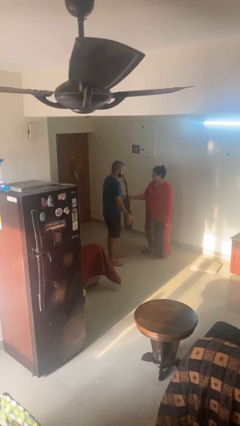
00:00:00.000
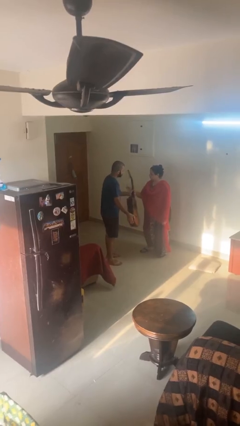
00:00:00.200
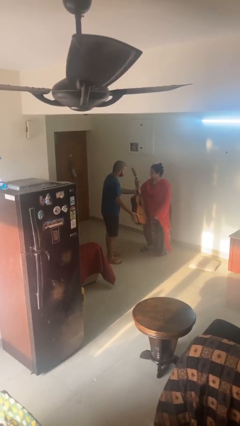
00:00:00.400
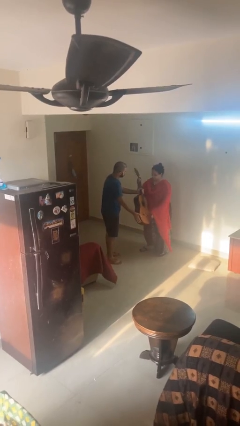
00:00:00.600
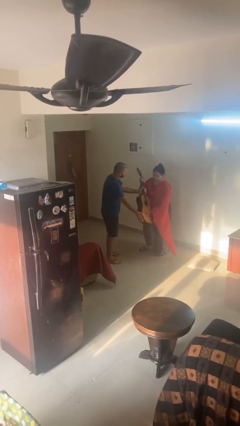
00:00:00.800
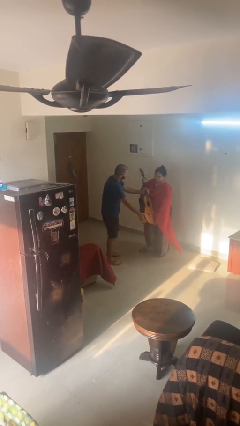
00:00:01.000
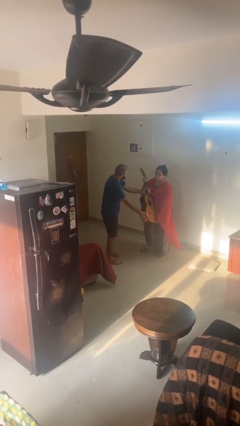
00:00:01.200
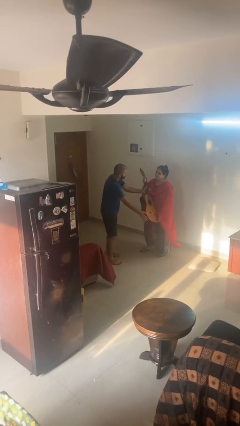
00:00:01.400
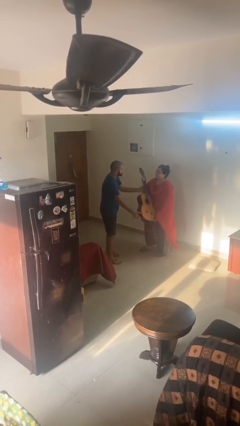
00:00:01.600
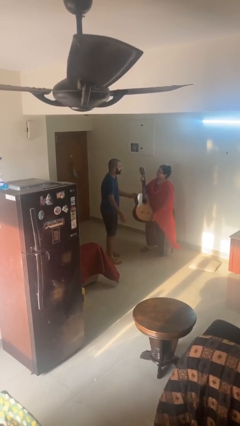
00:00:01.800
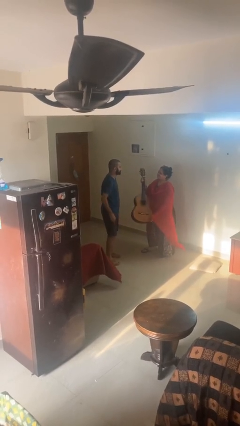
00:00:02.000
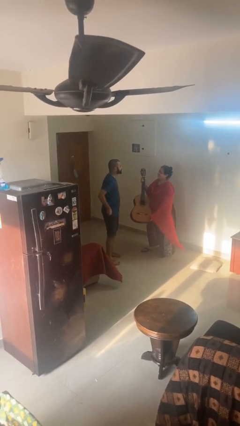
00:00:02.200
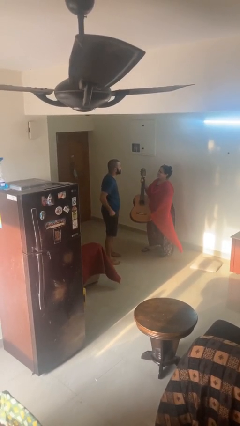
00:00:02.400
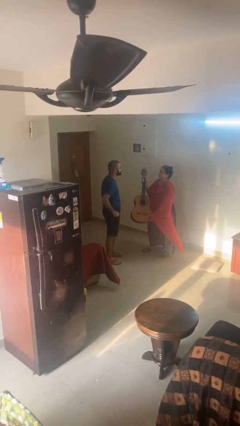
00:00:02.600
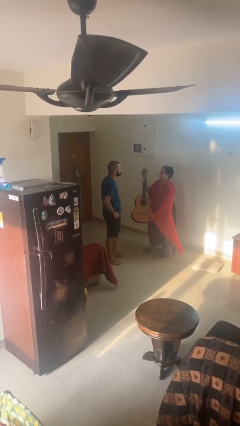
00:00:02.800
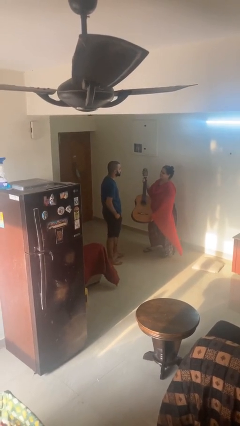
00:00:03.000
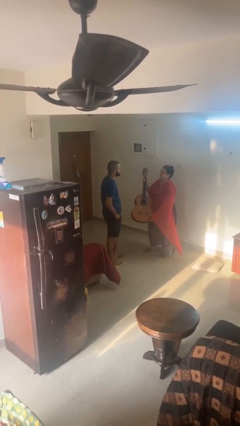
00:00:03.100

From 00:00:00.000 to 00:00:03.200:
person transfers object to person

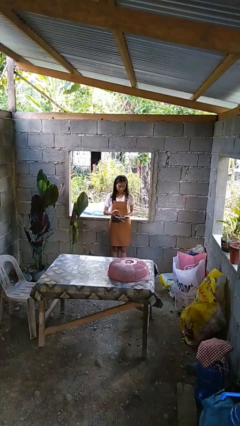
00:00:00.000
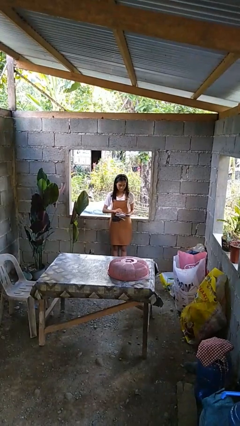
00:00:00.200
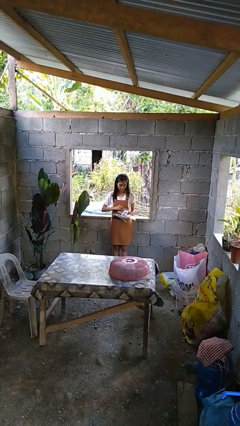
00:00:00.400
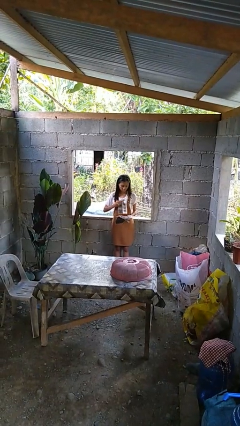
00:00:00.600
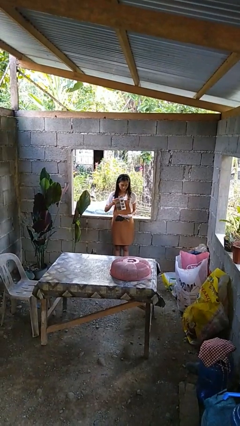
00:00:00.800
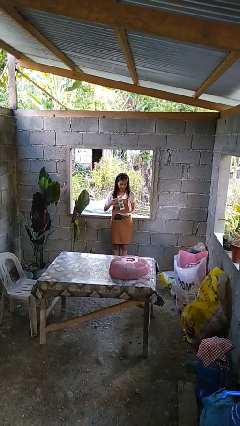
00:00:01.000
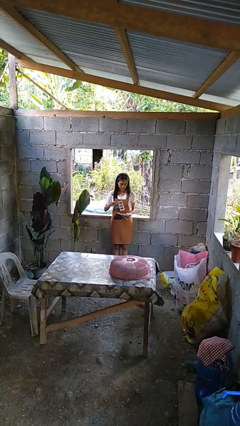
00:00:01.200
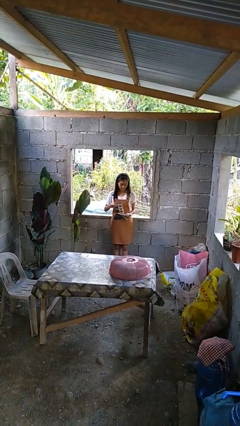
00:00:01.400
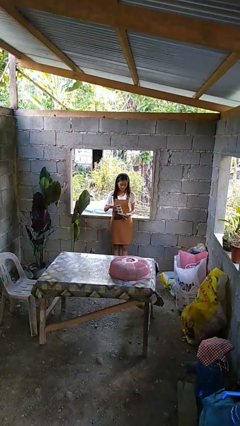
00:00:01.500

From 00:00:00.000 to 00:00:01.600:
person tears paper

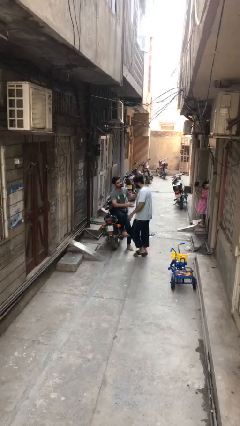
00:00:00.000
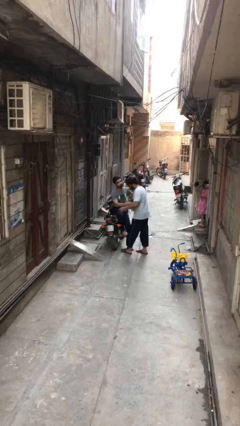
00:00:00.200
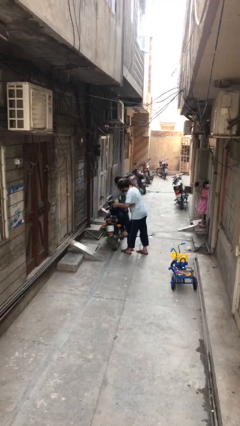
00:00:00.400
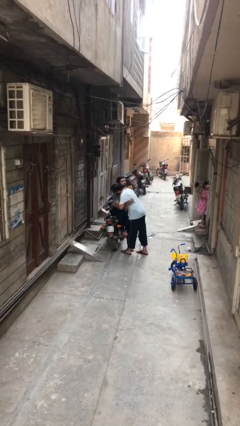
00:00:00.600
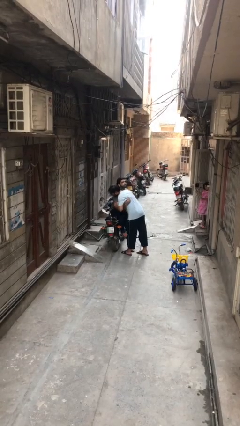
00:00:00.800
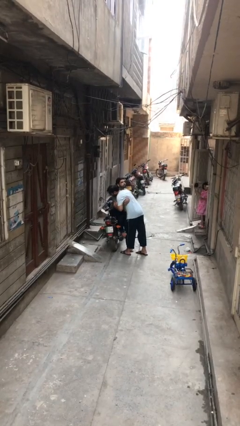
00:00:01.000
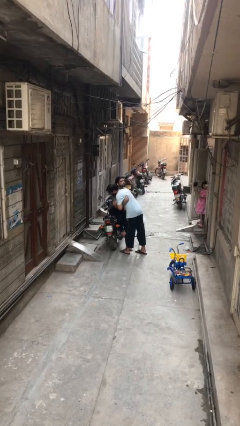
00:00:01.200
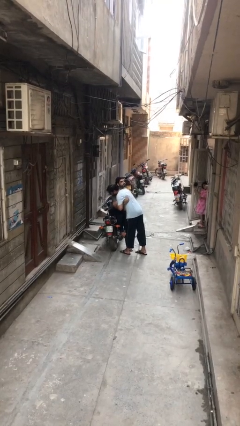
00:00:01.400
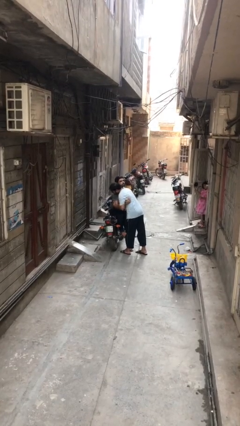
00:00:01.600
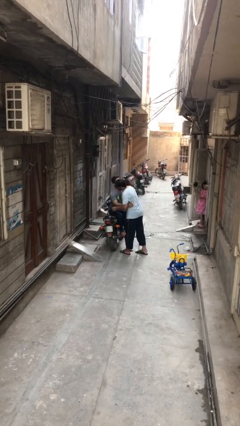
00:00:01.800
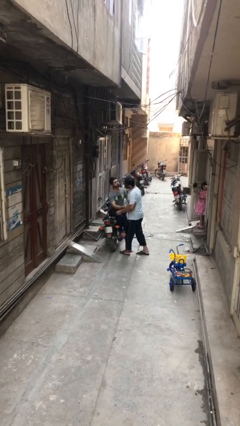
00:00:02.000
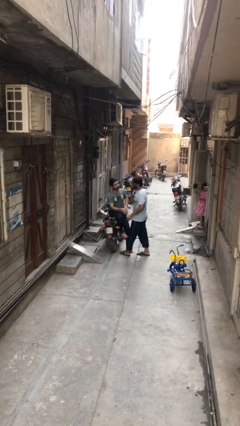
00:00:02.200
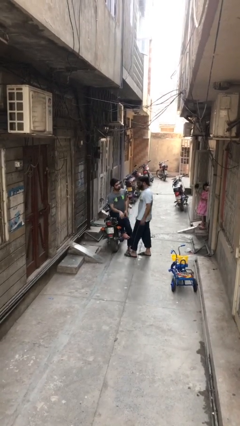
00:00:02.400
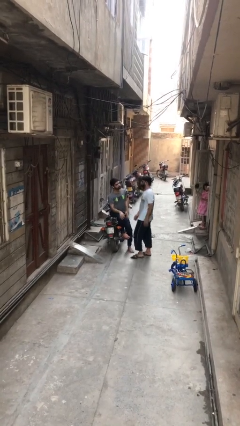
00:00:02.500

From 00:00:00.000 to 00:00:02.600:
person embraces person

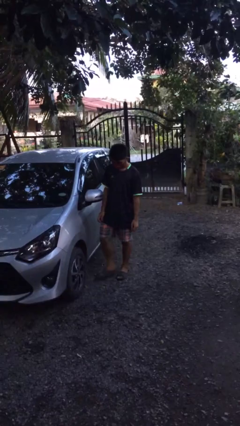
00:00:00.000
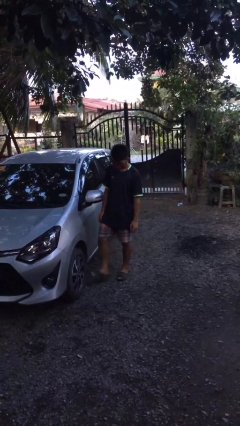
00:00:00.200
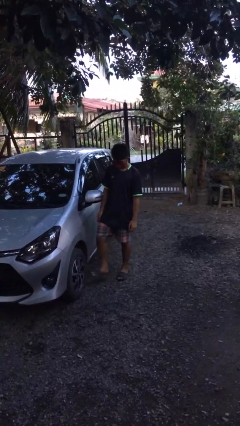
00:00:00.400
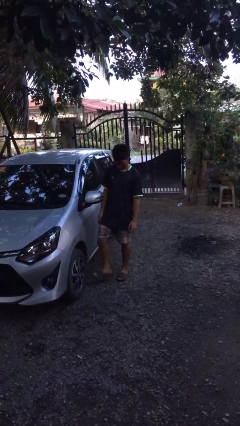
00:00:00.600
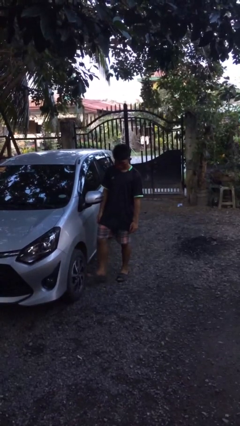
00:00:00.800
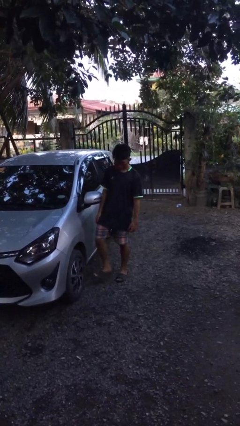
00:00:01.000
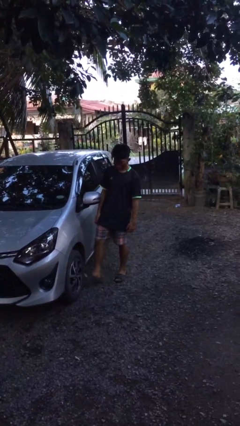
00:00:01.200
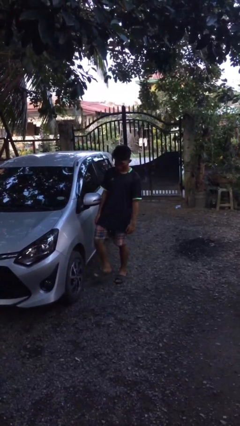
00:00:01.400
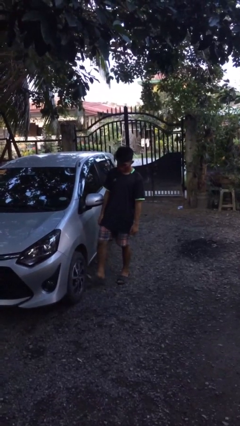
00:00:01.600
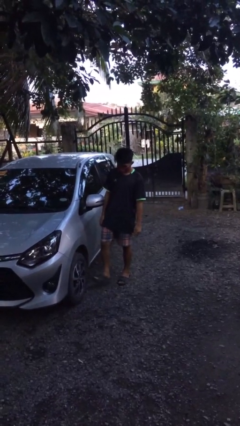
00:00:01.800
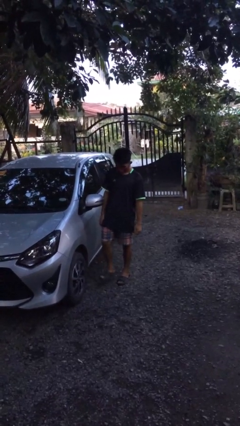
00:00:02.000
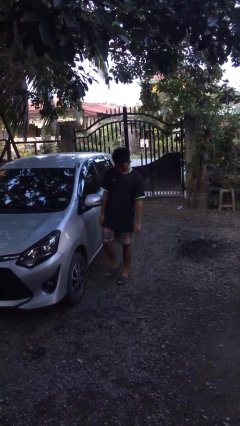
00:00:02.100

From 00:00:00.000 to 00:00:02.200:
person kicks car tires

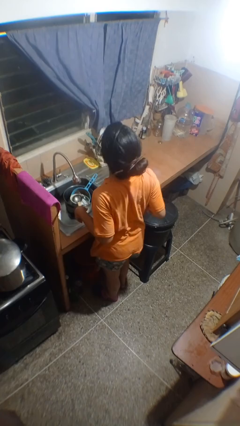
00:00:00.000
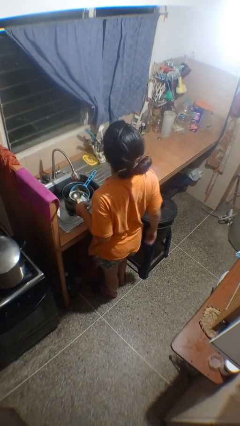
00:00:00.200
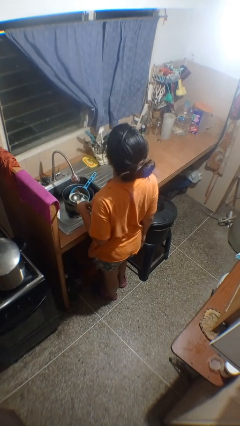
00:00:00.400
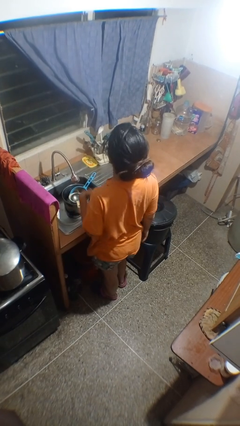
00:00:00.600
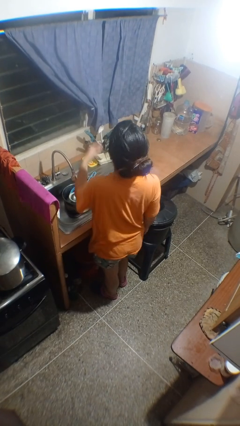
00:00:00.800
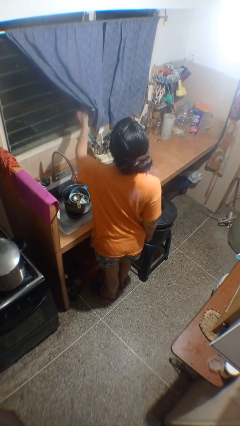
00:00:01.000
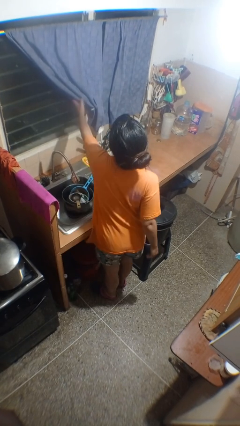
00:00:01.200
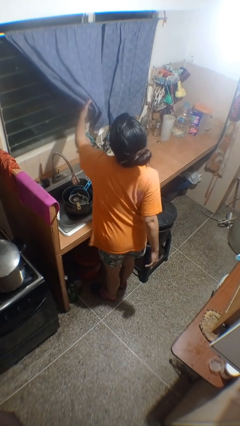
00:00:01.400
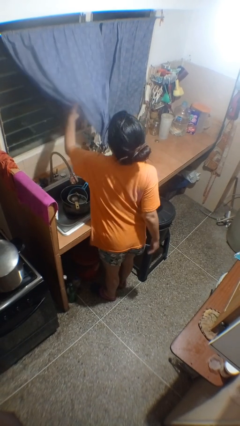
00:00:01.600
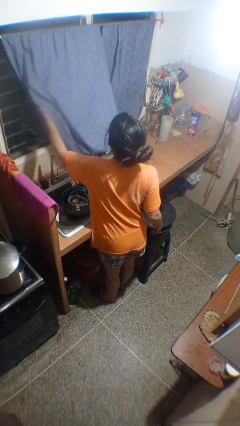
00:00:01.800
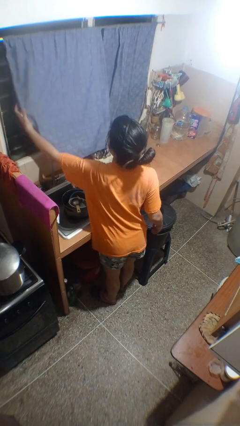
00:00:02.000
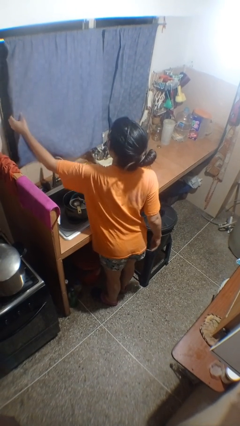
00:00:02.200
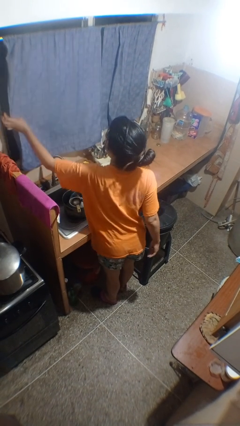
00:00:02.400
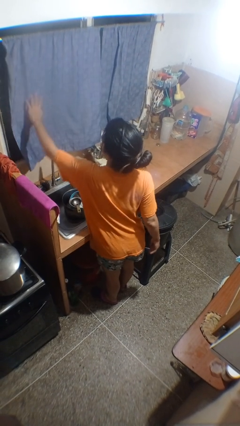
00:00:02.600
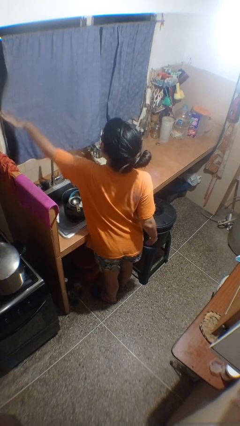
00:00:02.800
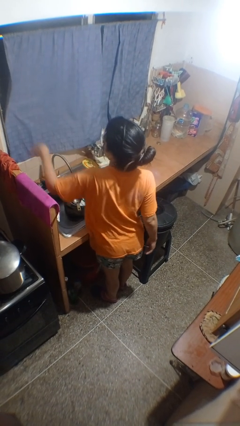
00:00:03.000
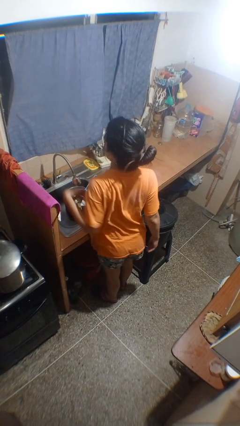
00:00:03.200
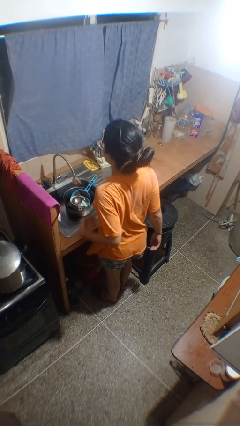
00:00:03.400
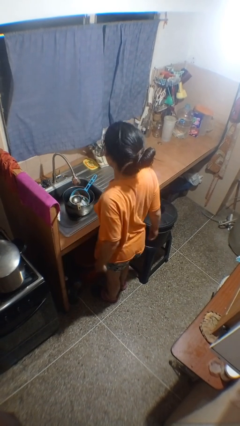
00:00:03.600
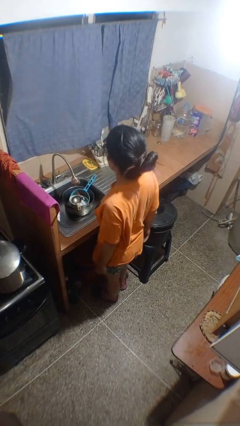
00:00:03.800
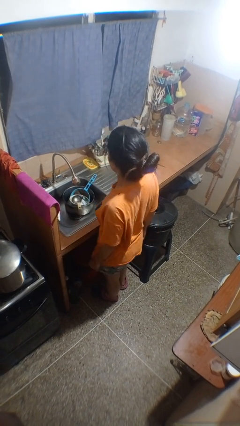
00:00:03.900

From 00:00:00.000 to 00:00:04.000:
person closes curtains

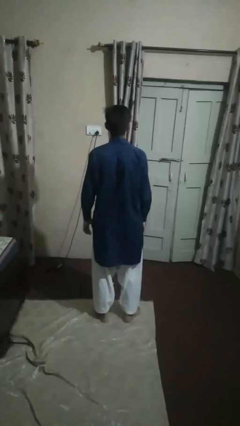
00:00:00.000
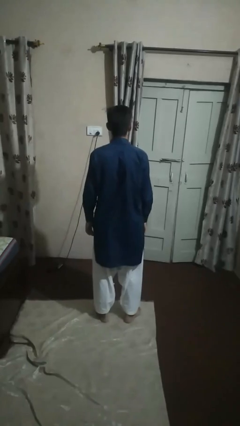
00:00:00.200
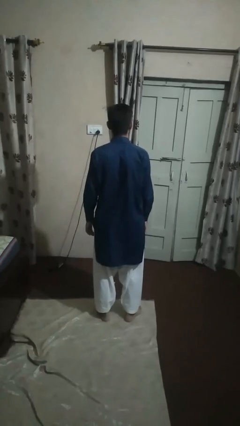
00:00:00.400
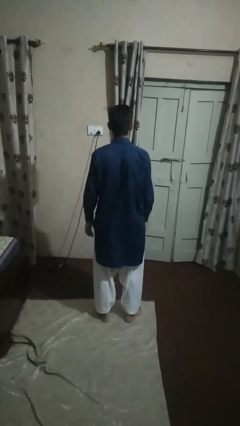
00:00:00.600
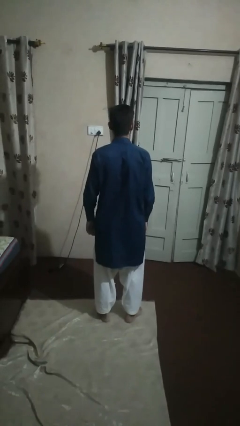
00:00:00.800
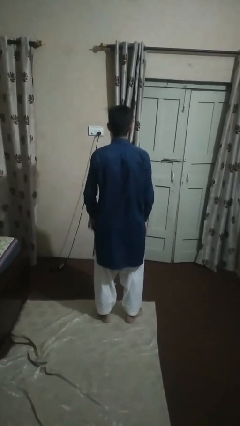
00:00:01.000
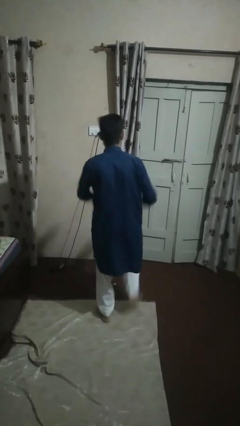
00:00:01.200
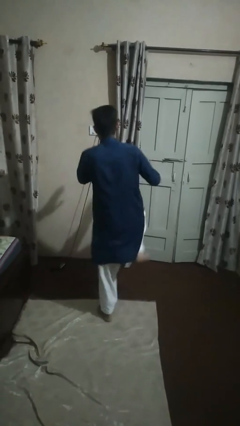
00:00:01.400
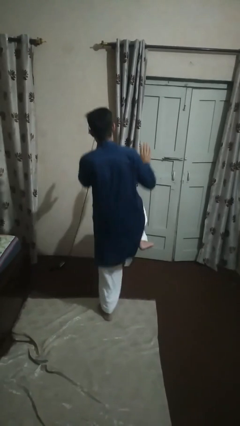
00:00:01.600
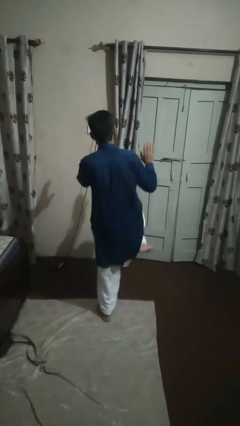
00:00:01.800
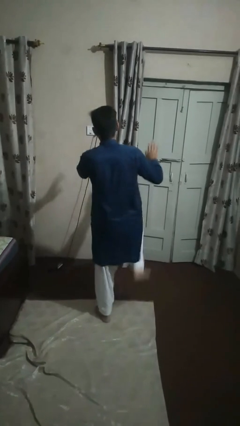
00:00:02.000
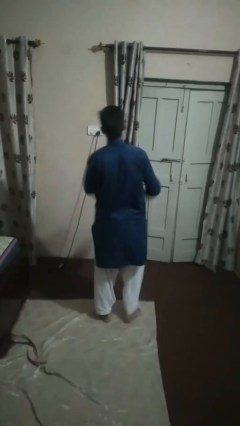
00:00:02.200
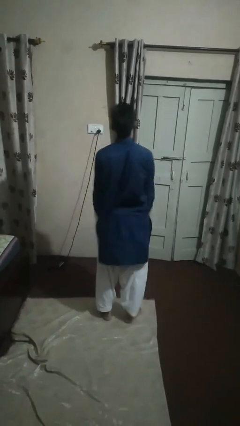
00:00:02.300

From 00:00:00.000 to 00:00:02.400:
person dances in place

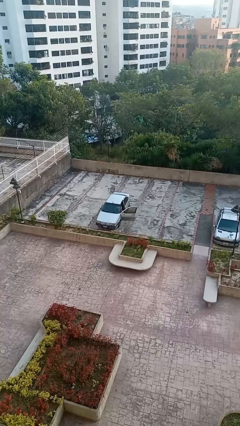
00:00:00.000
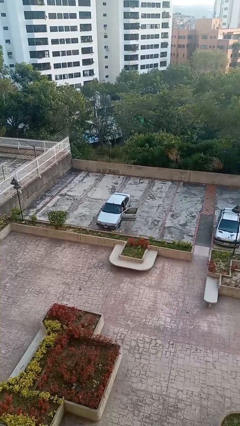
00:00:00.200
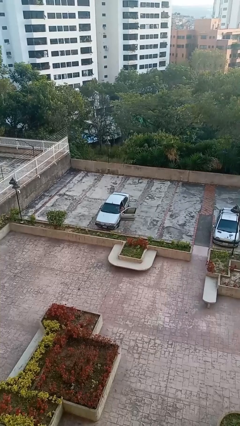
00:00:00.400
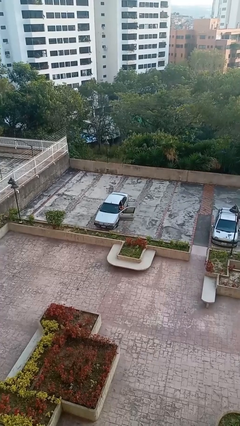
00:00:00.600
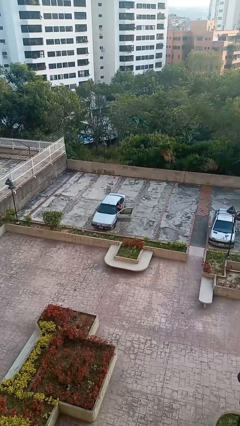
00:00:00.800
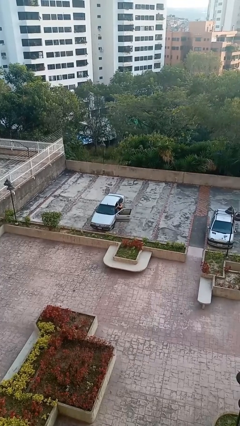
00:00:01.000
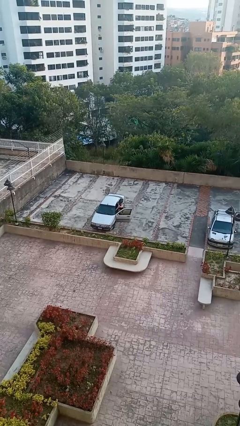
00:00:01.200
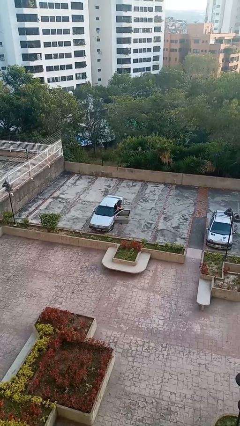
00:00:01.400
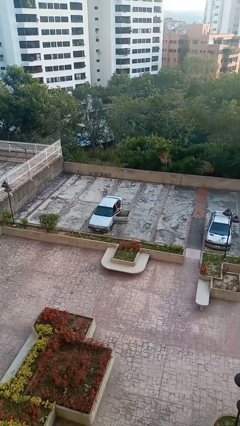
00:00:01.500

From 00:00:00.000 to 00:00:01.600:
person exits car
